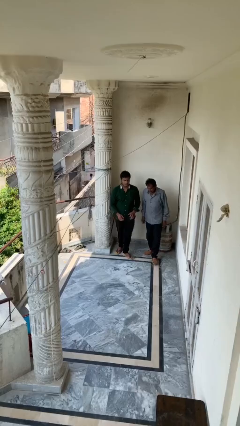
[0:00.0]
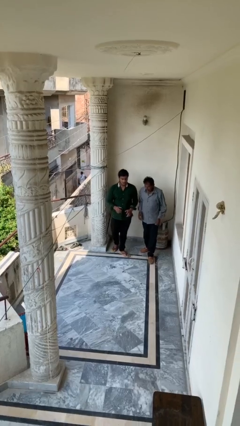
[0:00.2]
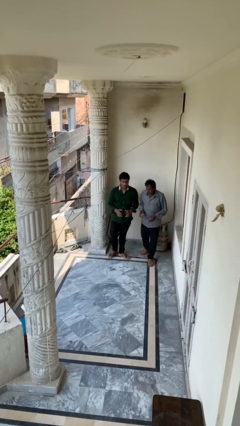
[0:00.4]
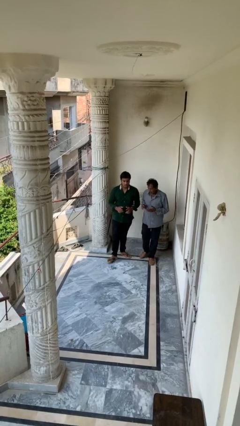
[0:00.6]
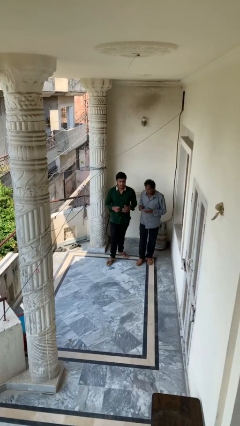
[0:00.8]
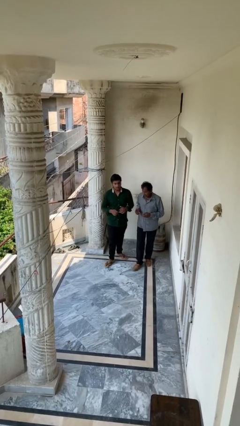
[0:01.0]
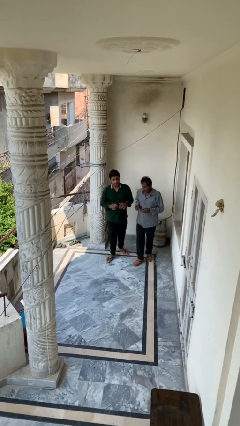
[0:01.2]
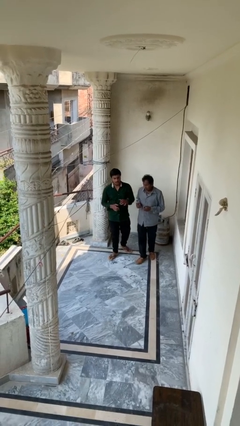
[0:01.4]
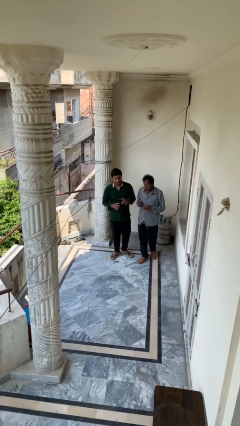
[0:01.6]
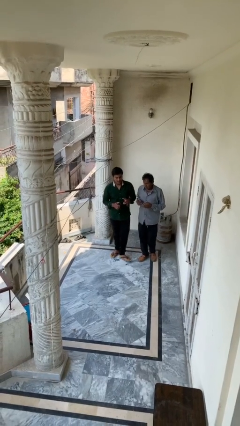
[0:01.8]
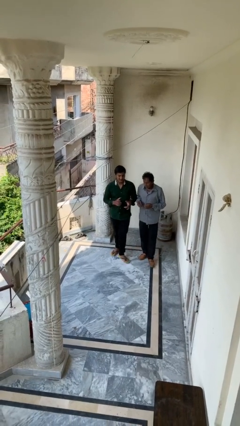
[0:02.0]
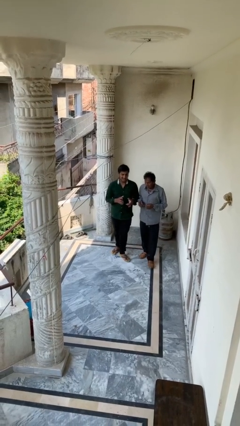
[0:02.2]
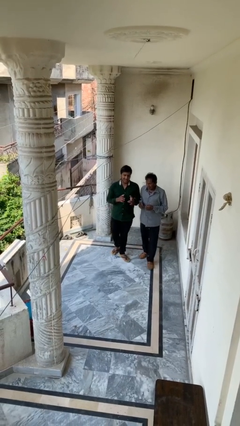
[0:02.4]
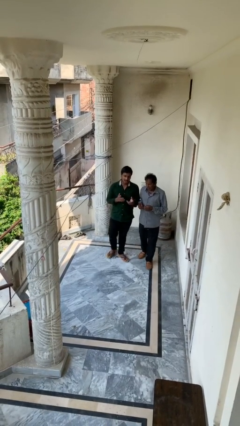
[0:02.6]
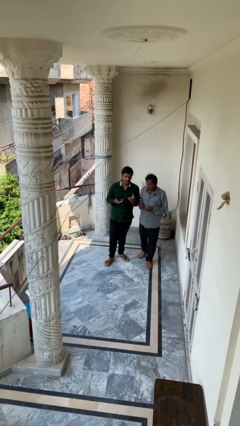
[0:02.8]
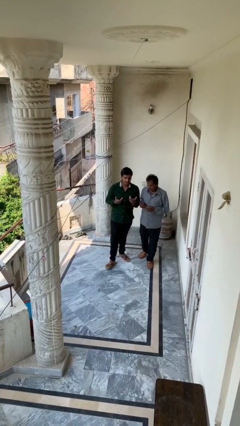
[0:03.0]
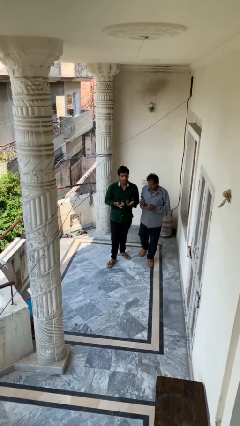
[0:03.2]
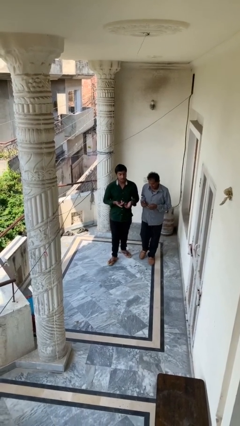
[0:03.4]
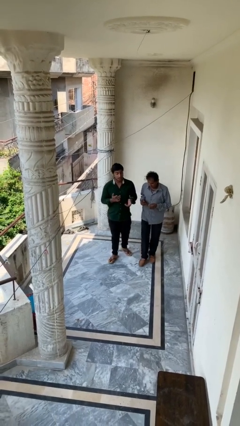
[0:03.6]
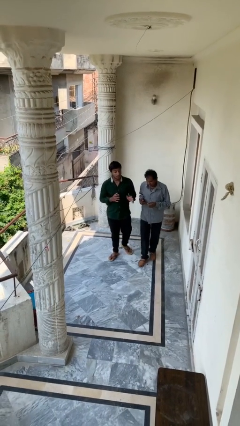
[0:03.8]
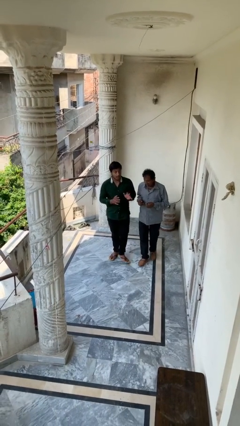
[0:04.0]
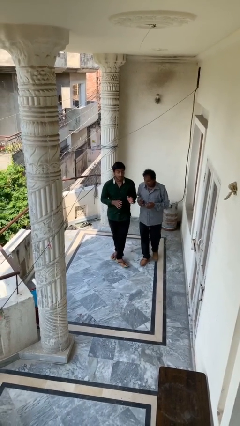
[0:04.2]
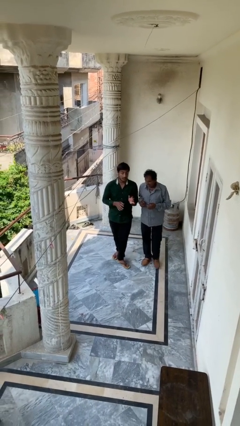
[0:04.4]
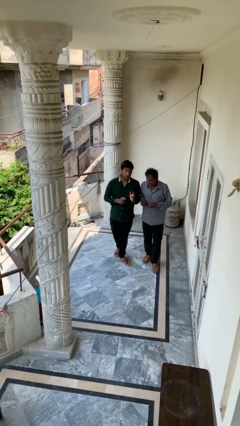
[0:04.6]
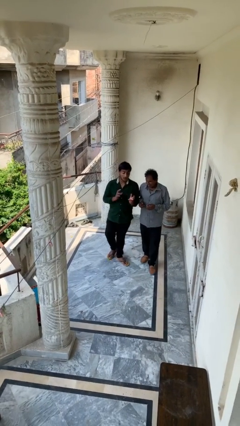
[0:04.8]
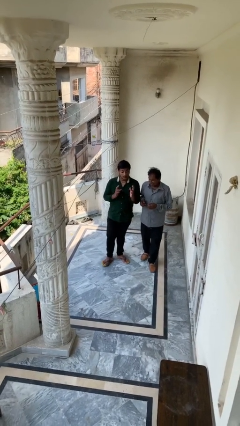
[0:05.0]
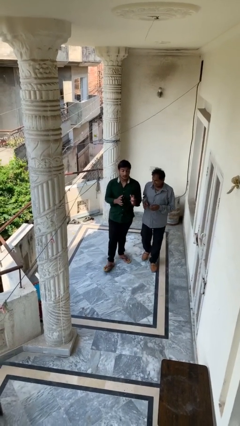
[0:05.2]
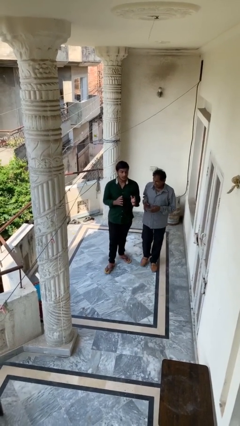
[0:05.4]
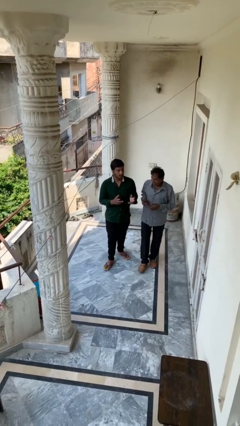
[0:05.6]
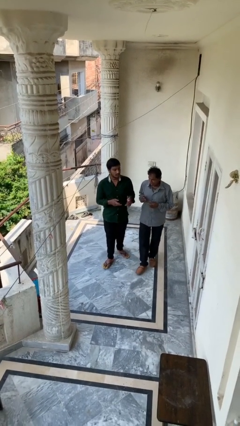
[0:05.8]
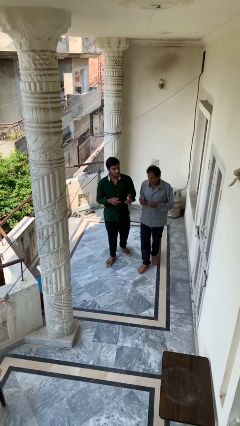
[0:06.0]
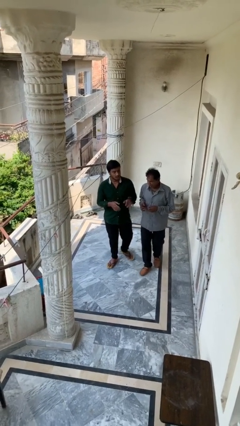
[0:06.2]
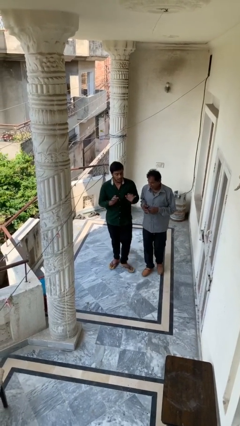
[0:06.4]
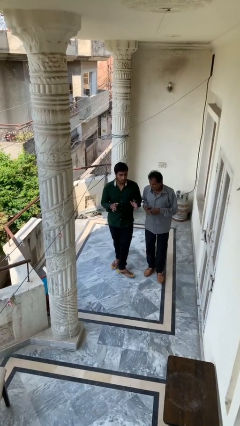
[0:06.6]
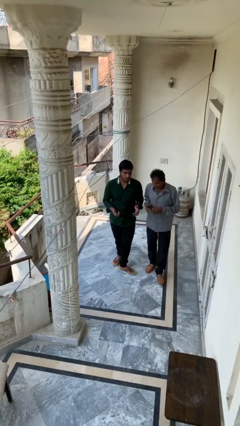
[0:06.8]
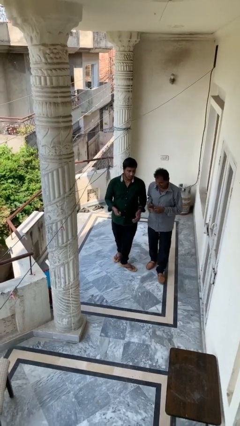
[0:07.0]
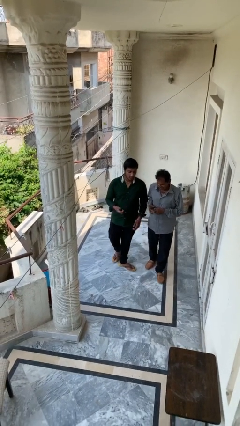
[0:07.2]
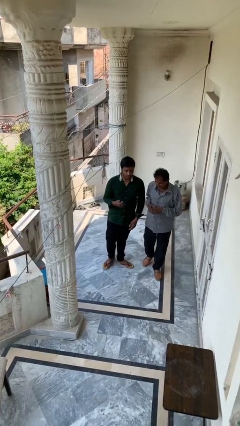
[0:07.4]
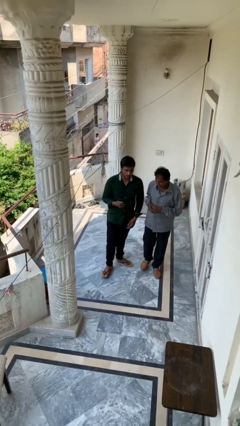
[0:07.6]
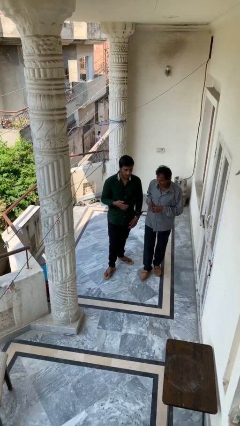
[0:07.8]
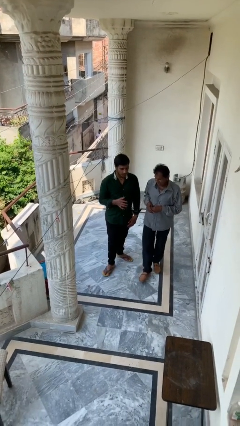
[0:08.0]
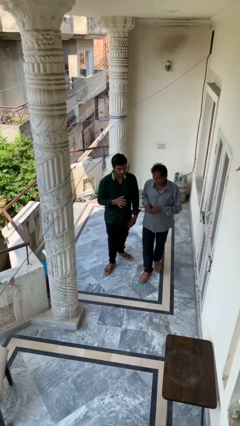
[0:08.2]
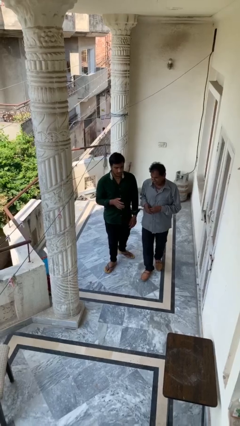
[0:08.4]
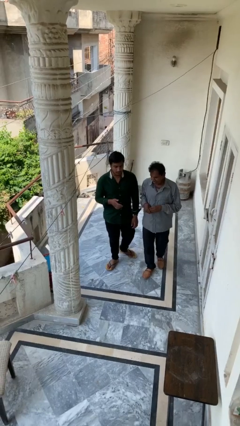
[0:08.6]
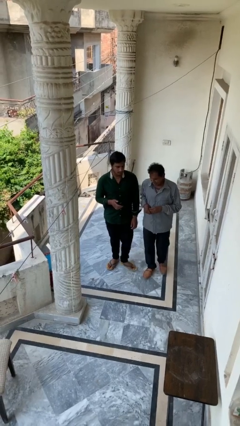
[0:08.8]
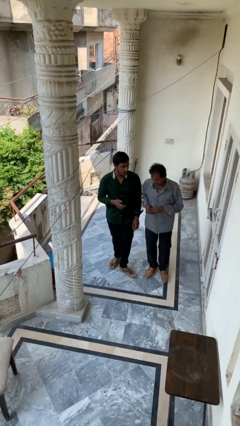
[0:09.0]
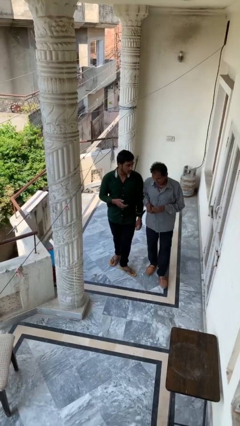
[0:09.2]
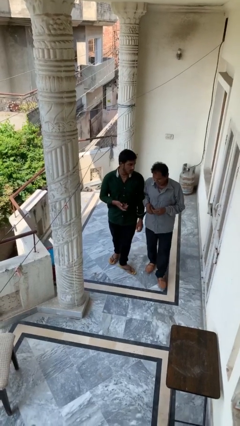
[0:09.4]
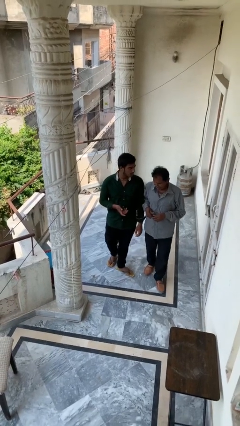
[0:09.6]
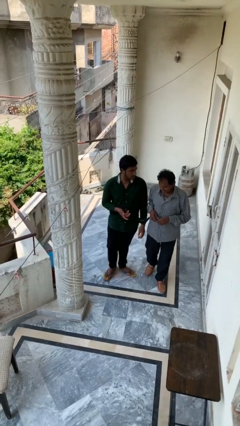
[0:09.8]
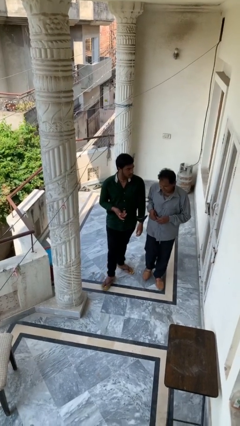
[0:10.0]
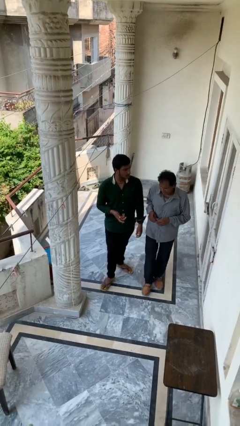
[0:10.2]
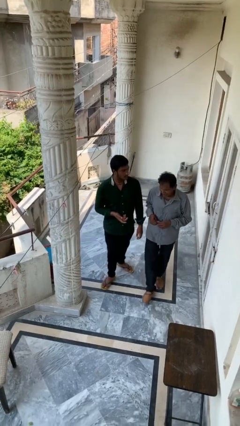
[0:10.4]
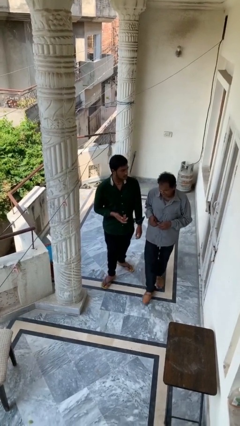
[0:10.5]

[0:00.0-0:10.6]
person talks to person

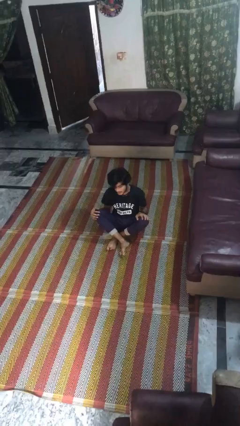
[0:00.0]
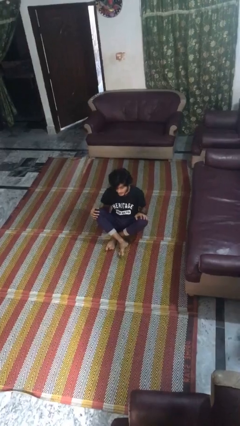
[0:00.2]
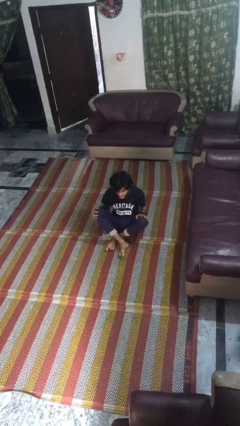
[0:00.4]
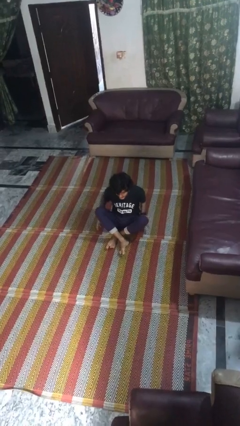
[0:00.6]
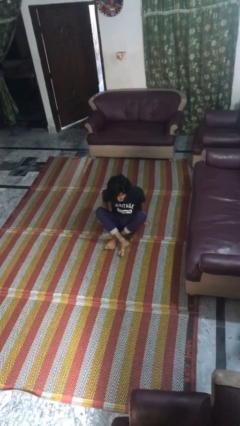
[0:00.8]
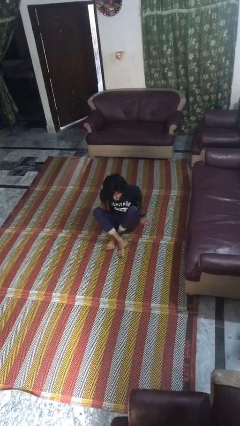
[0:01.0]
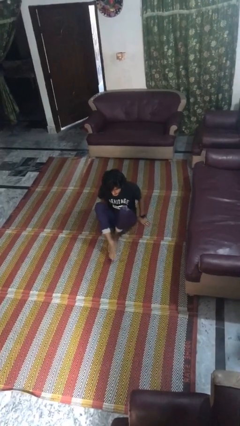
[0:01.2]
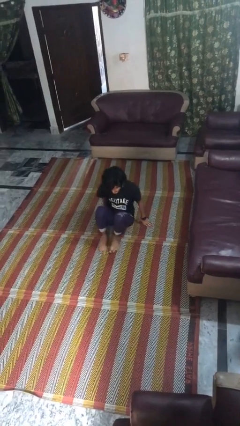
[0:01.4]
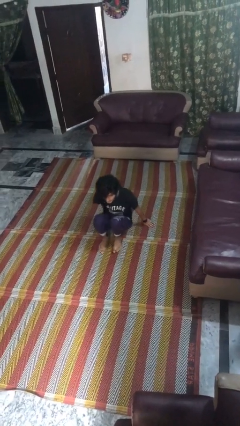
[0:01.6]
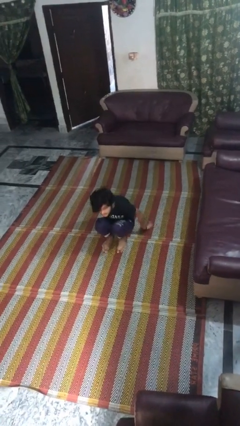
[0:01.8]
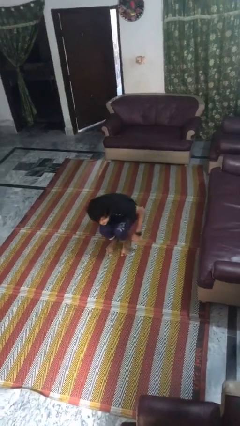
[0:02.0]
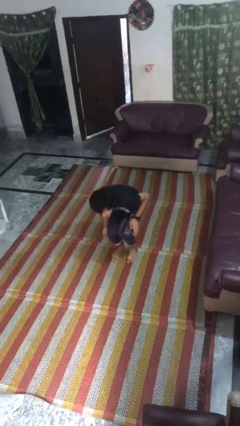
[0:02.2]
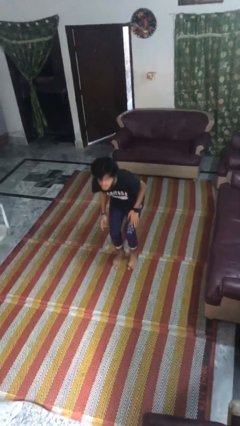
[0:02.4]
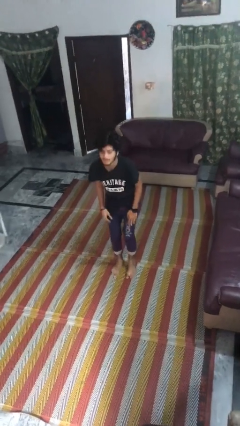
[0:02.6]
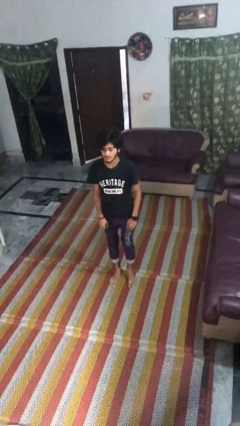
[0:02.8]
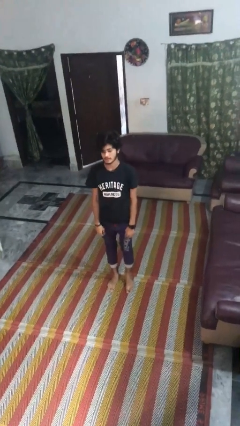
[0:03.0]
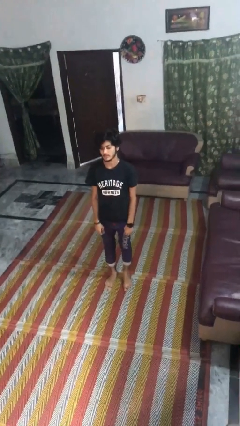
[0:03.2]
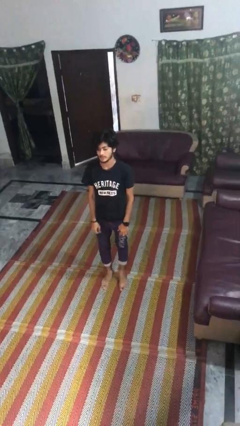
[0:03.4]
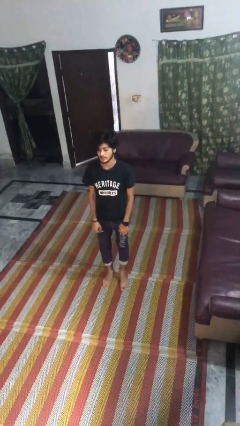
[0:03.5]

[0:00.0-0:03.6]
person stands up from floor

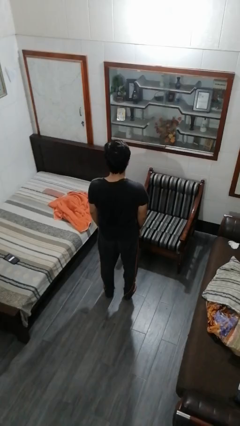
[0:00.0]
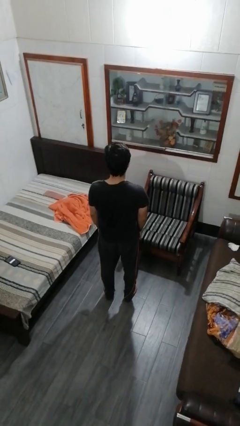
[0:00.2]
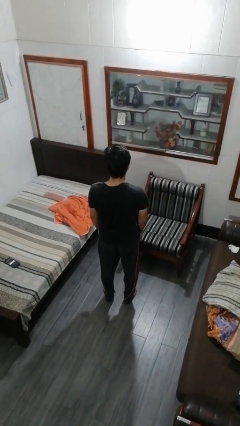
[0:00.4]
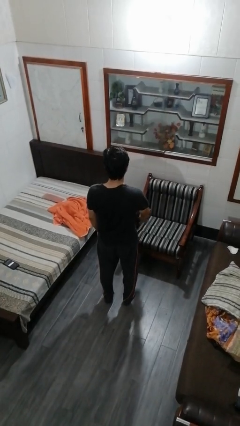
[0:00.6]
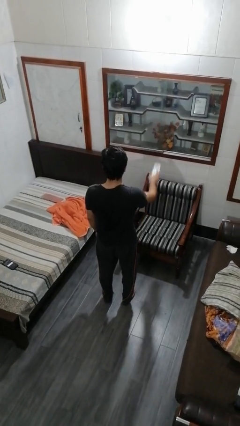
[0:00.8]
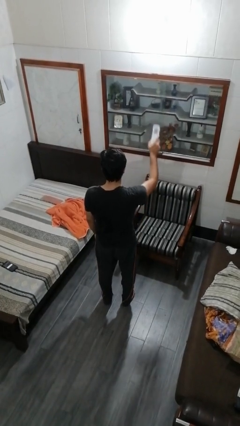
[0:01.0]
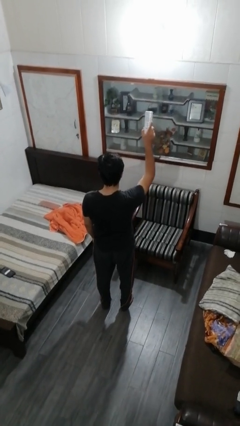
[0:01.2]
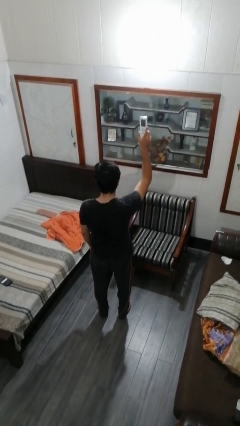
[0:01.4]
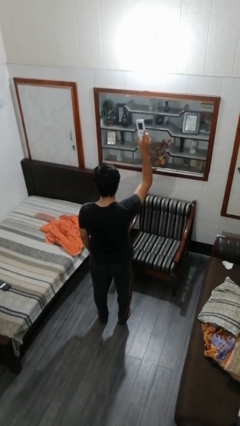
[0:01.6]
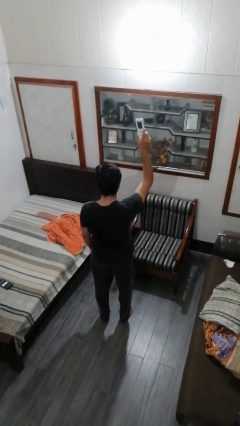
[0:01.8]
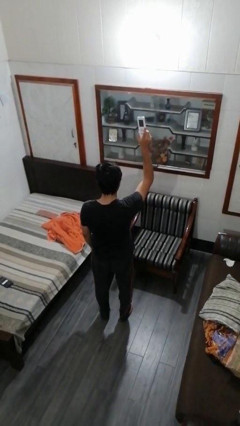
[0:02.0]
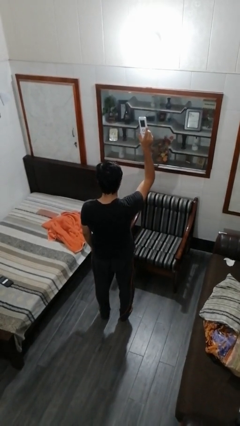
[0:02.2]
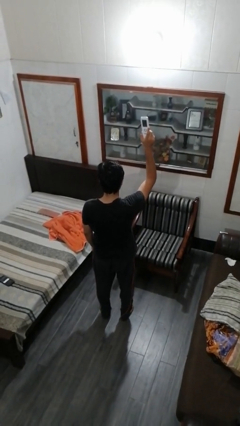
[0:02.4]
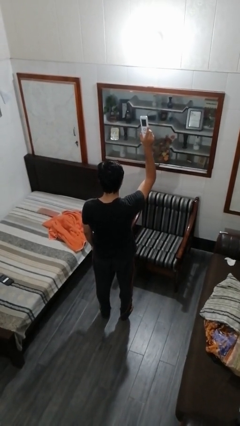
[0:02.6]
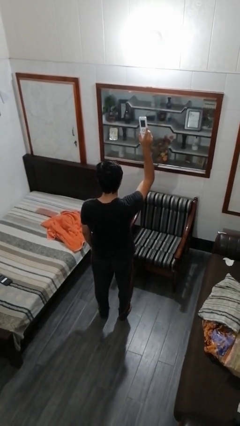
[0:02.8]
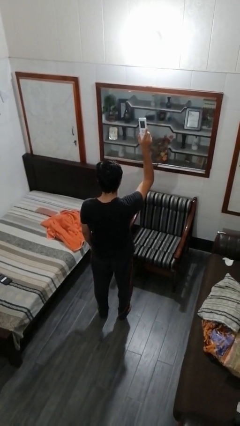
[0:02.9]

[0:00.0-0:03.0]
person holds object above head

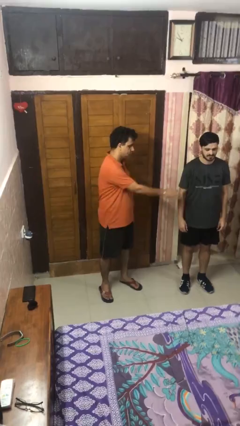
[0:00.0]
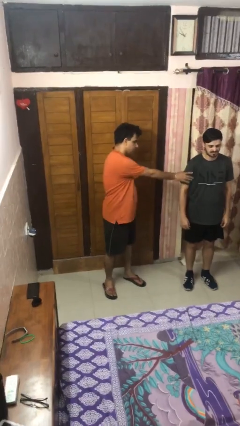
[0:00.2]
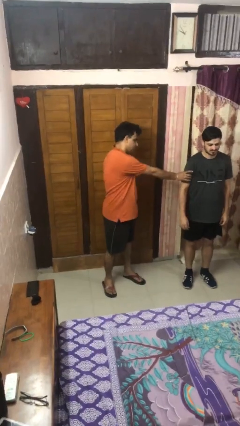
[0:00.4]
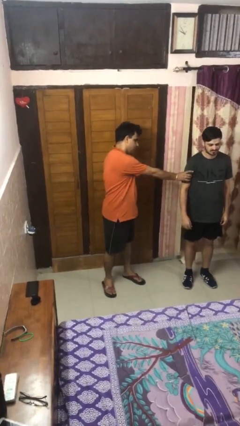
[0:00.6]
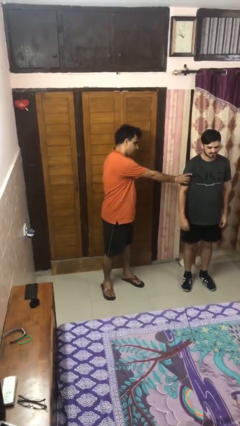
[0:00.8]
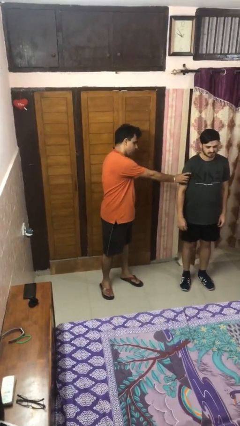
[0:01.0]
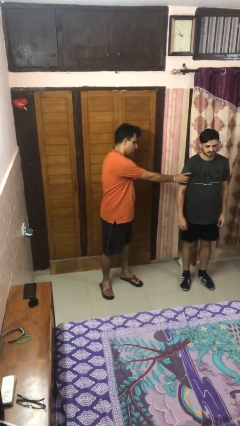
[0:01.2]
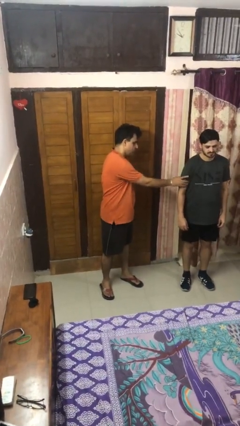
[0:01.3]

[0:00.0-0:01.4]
person grabs person by bicep
